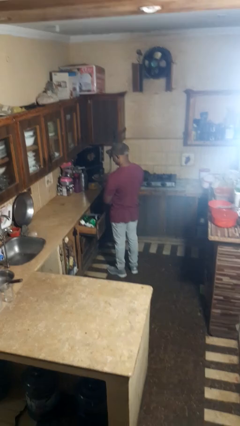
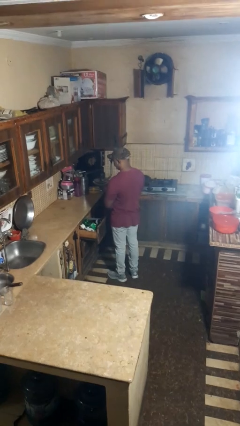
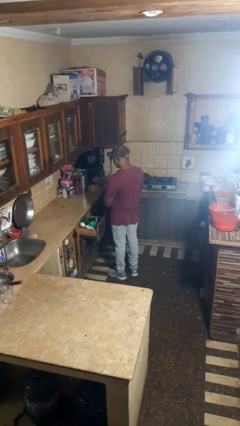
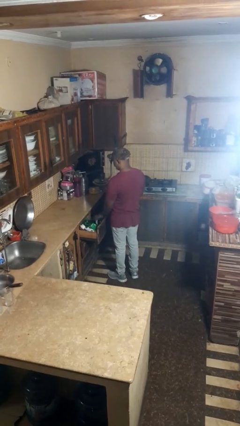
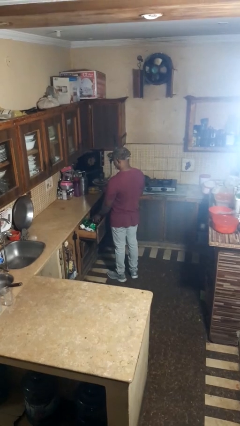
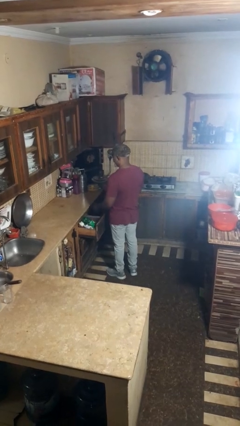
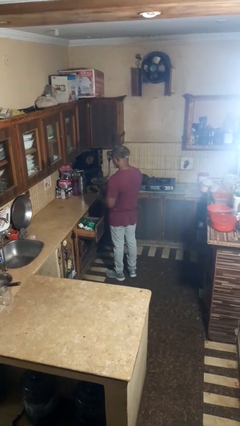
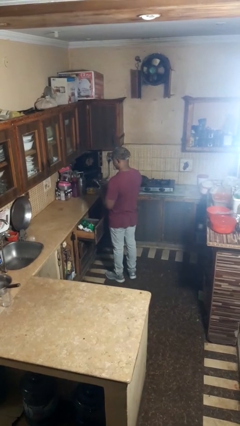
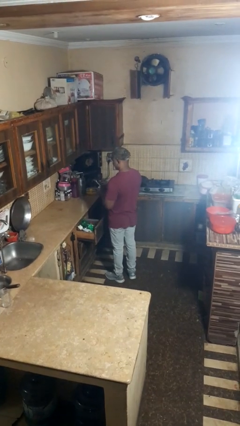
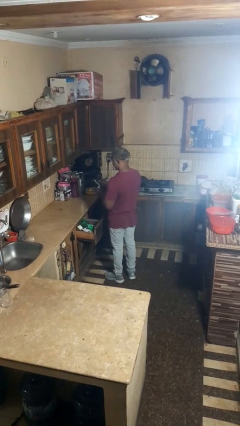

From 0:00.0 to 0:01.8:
person takes object from kitchen drawer

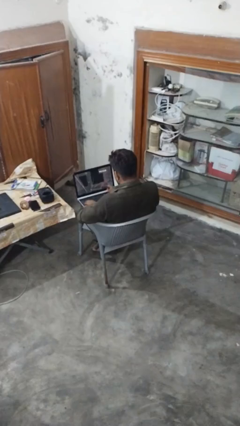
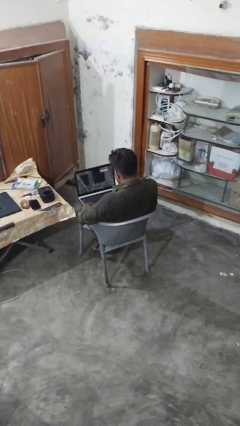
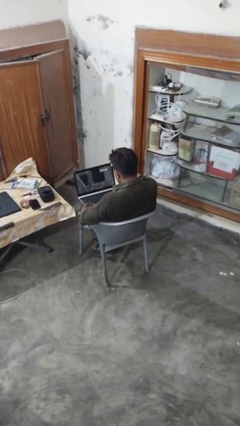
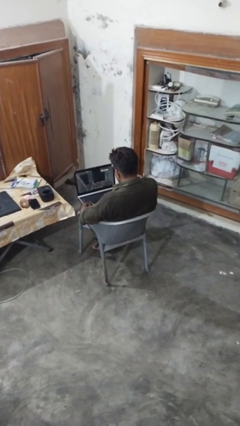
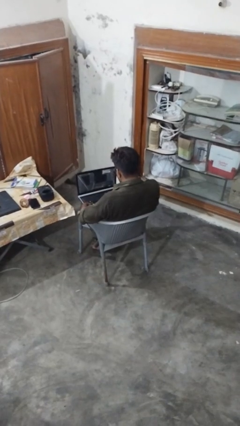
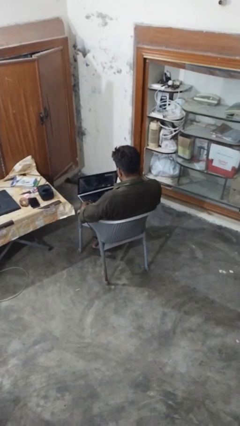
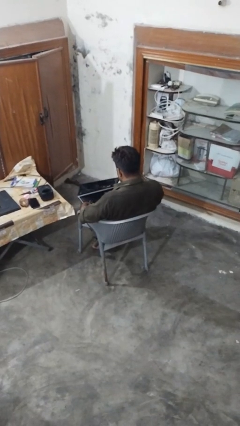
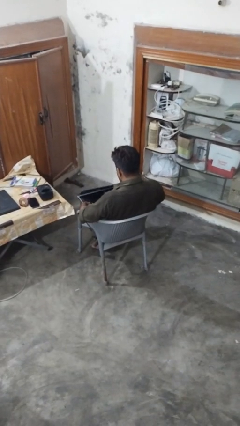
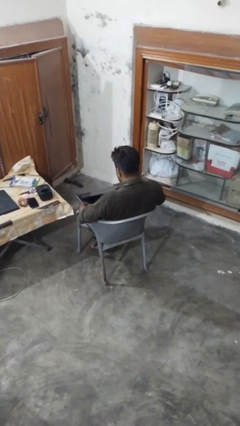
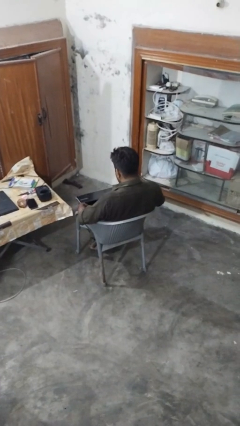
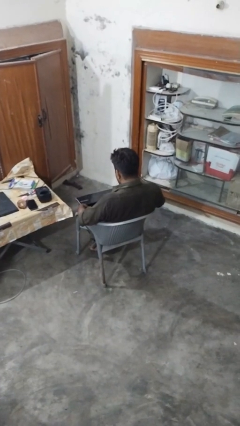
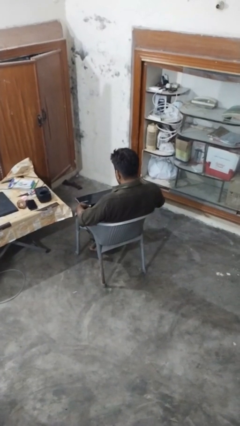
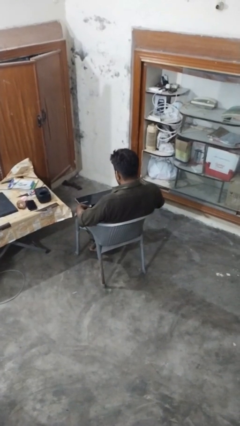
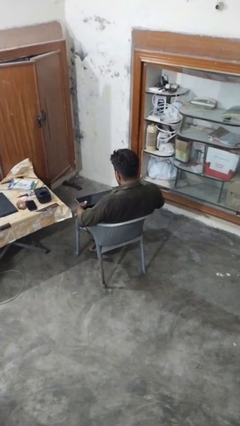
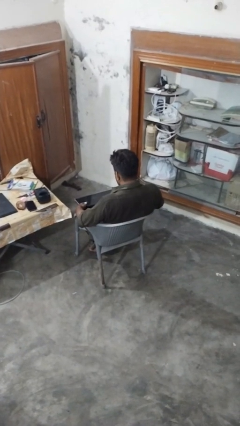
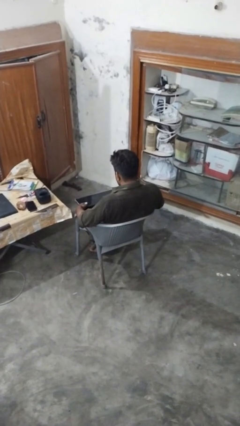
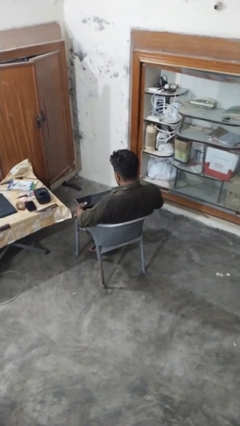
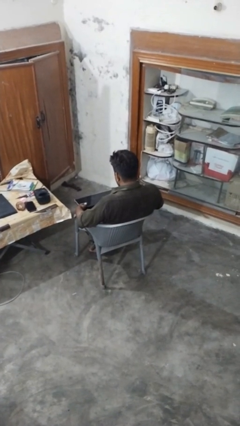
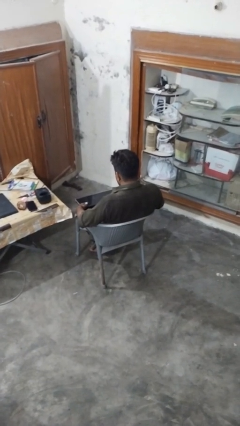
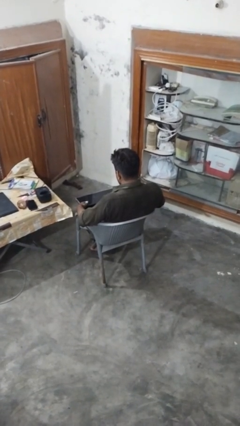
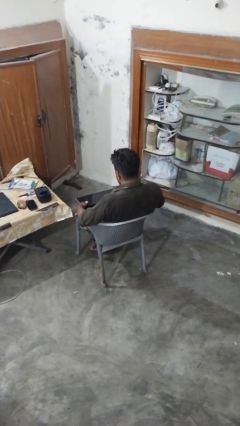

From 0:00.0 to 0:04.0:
person closes laptop

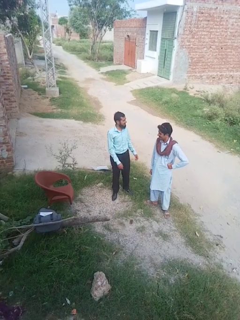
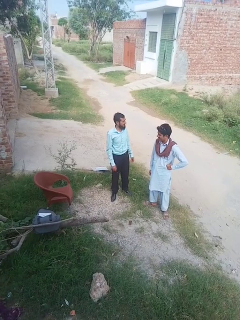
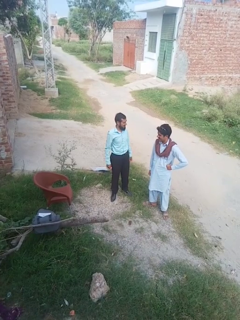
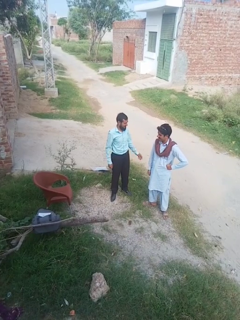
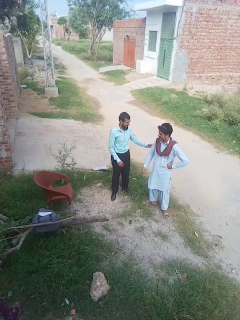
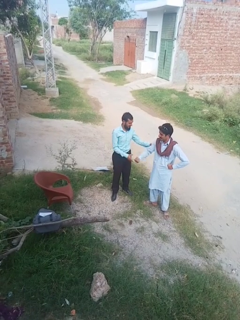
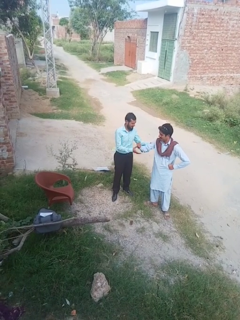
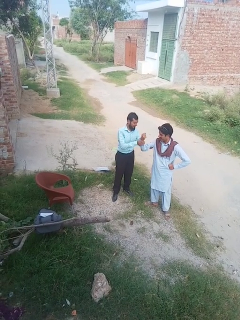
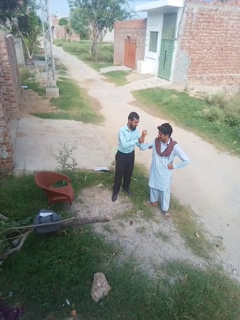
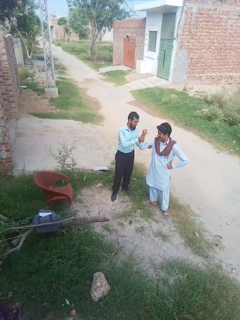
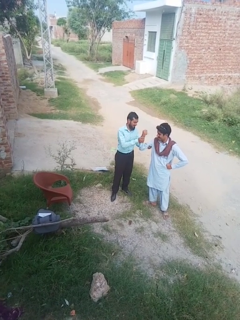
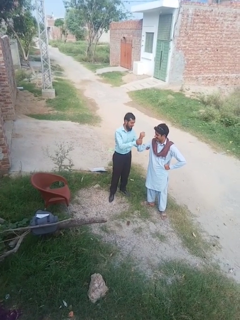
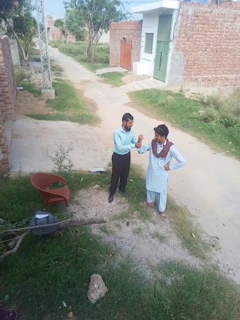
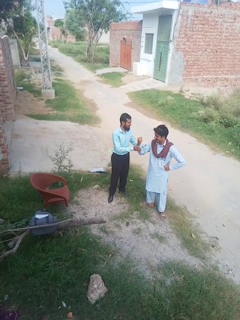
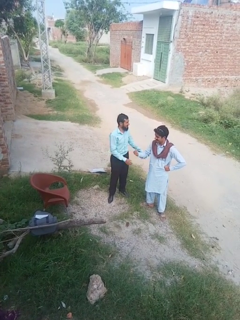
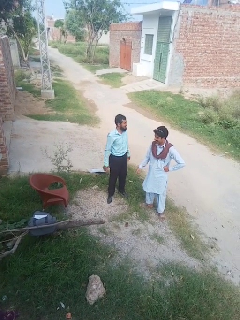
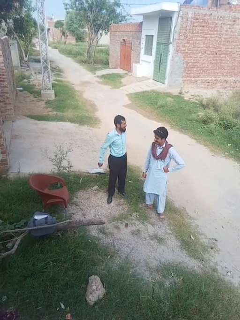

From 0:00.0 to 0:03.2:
person grabs person by bicep

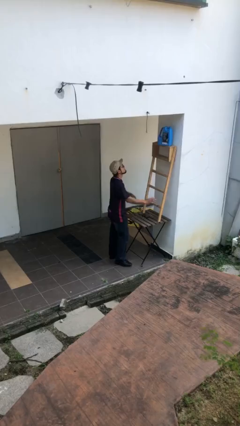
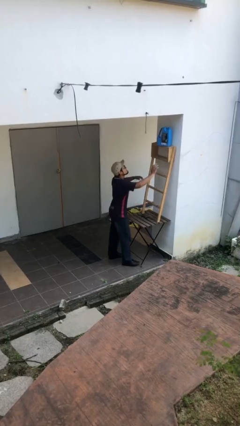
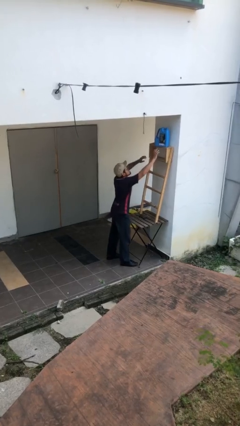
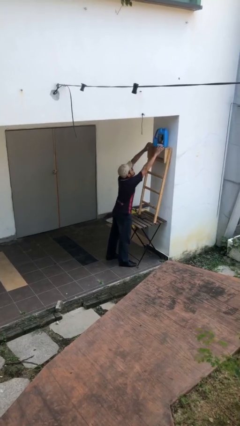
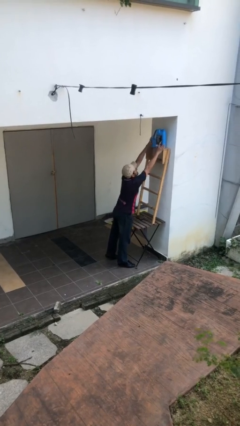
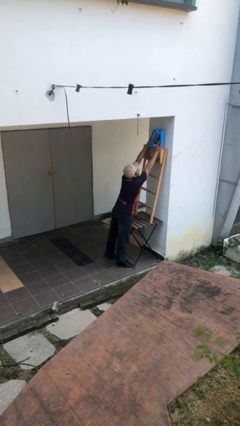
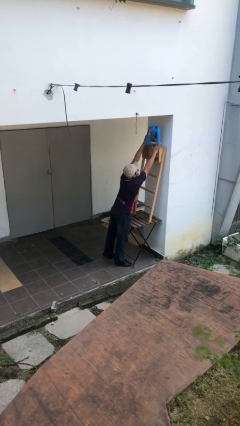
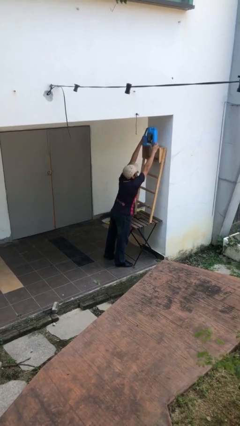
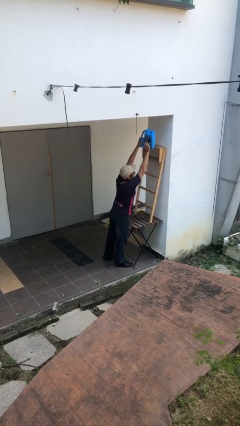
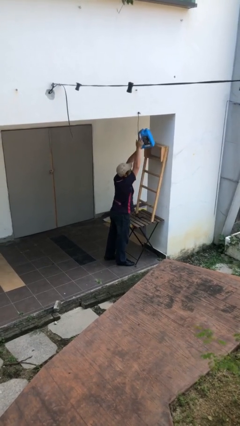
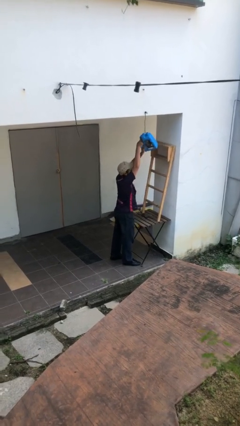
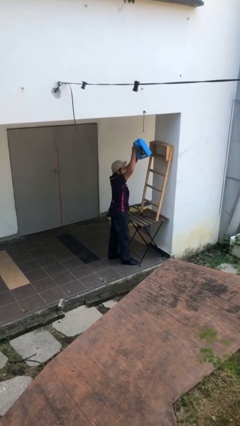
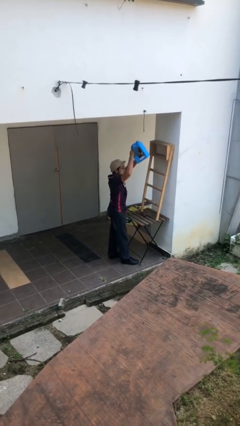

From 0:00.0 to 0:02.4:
person picks up object from shelf

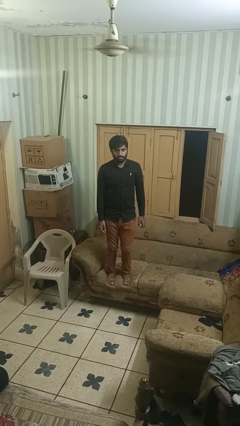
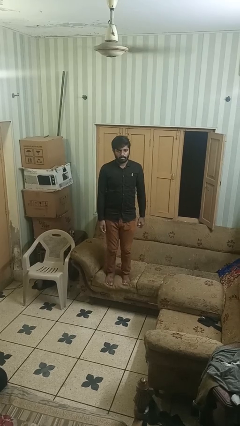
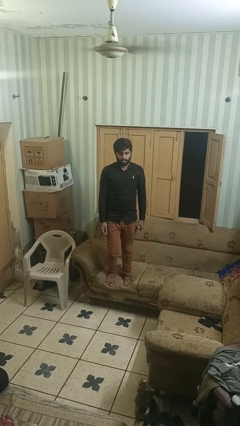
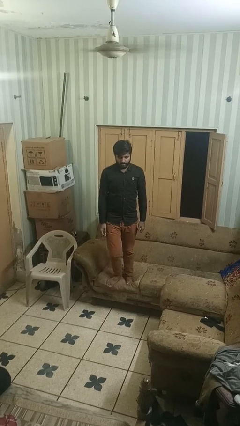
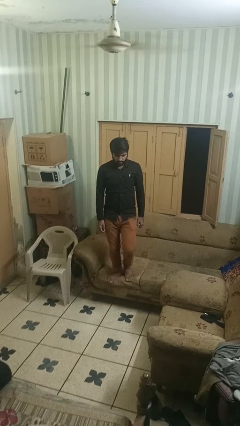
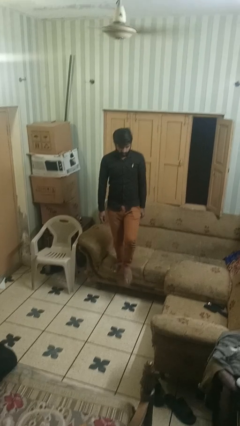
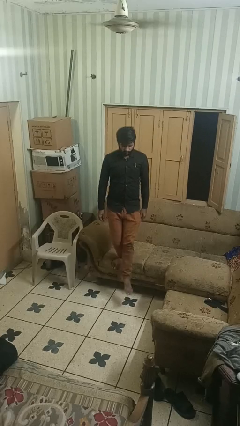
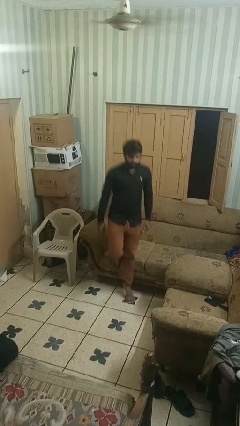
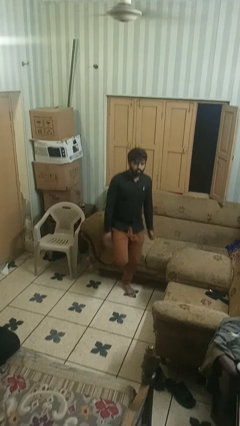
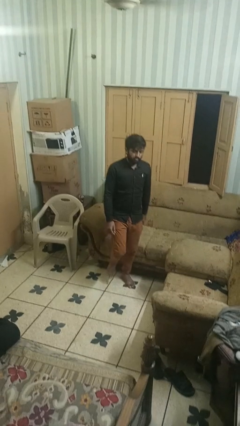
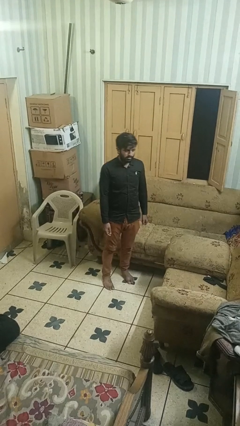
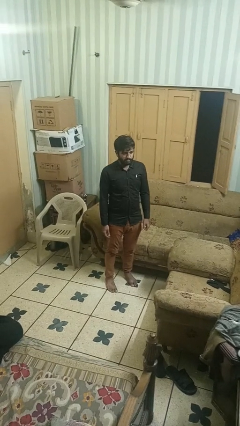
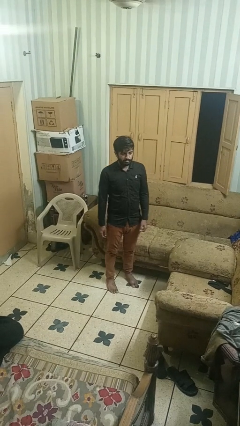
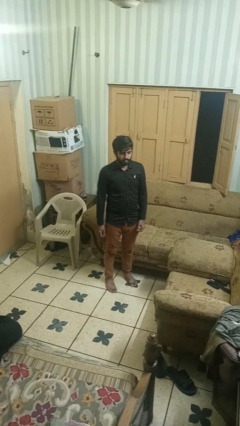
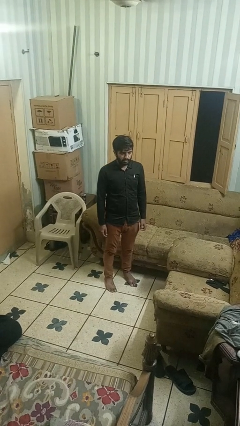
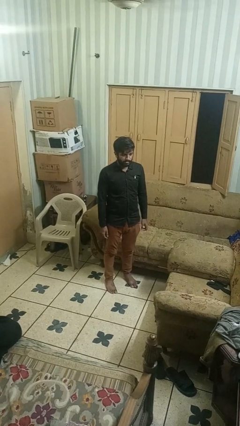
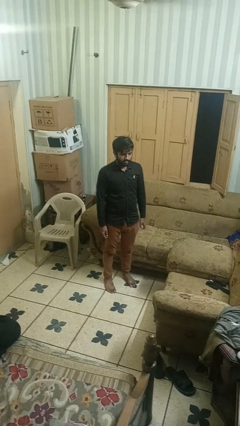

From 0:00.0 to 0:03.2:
person climbs off couch

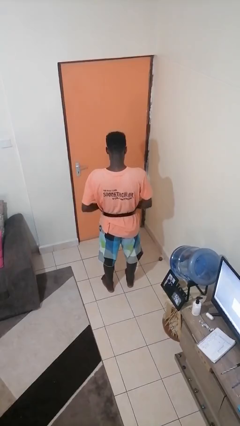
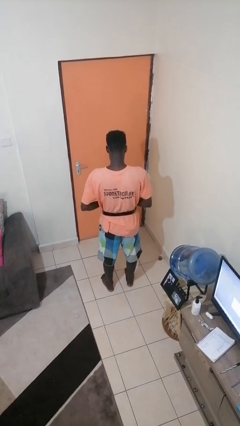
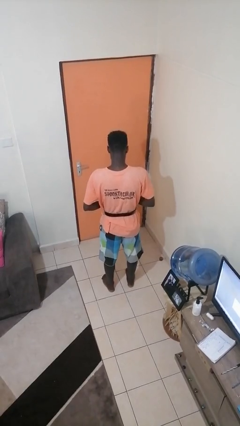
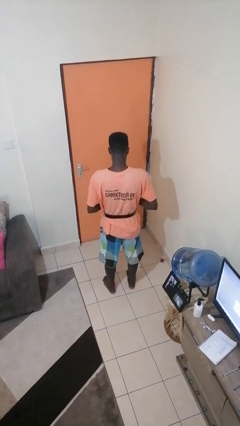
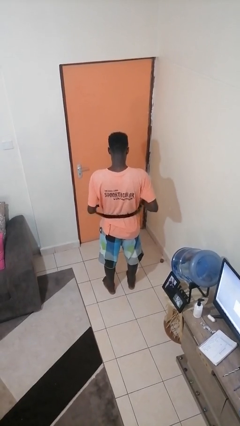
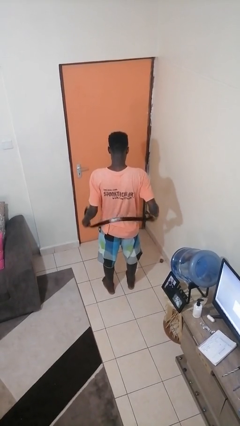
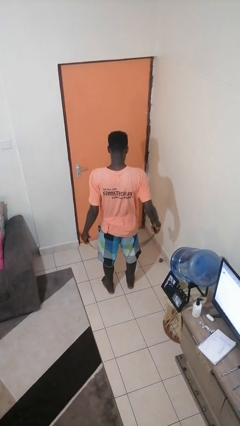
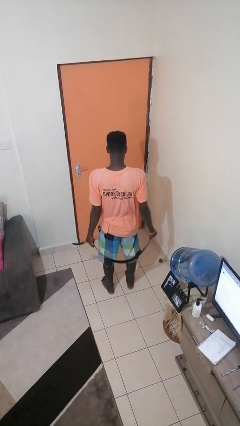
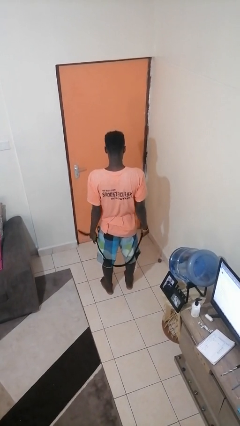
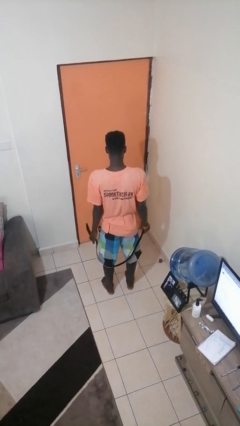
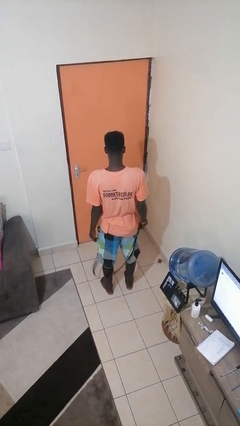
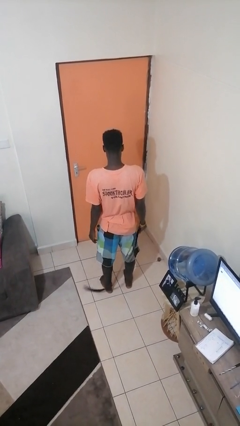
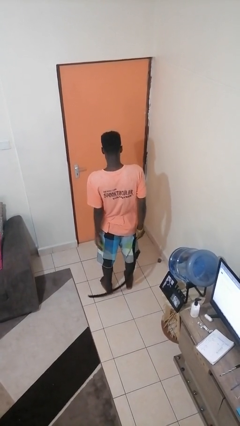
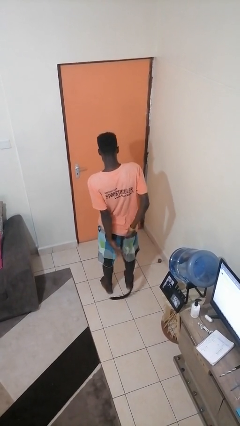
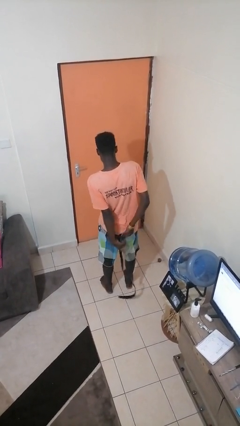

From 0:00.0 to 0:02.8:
person takes off belt

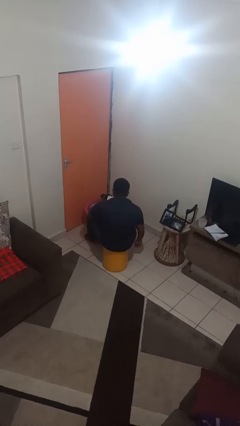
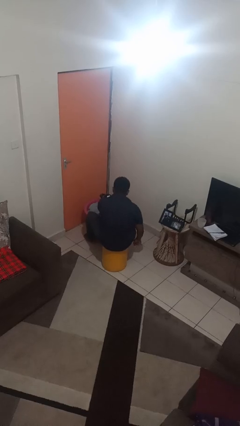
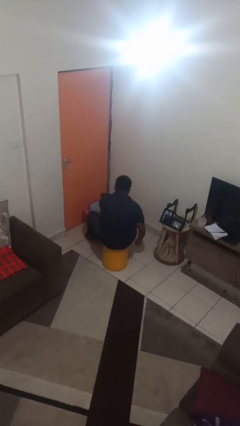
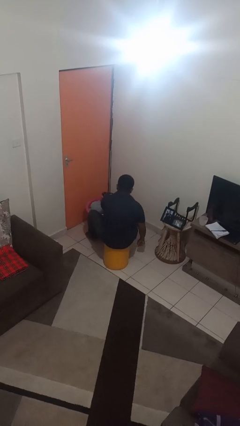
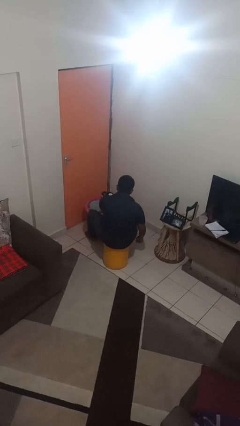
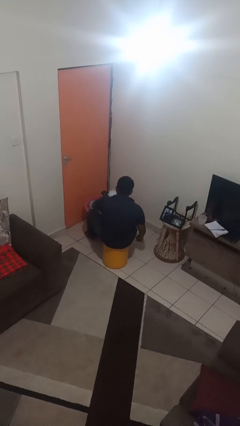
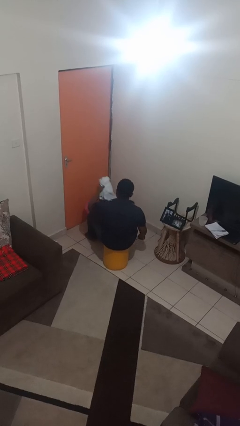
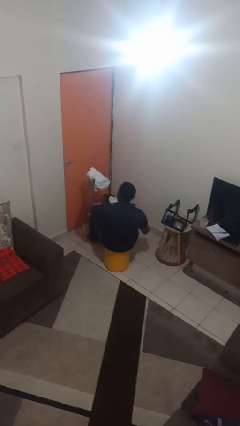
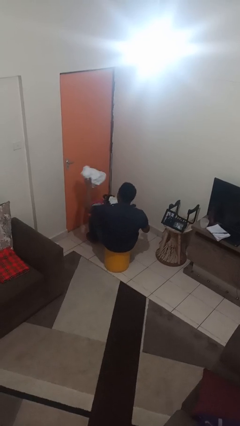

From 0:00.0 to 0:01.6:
person takes object from basket
